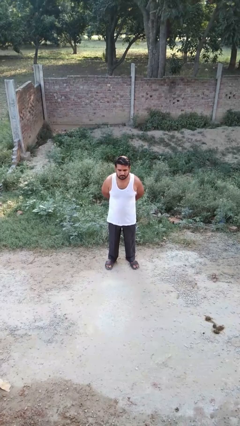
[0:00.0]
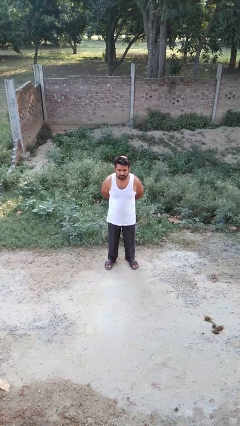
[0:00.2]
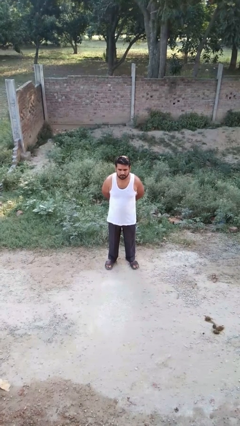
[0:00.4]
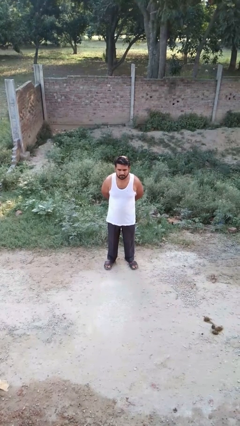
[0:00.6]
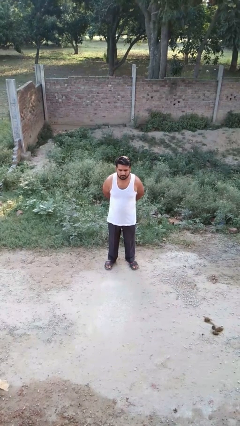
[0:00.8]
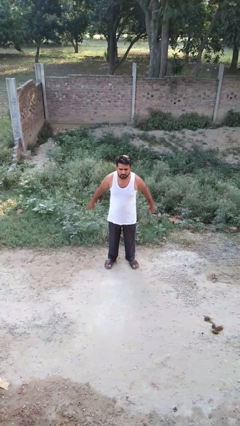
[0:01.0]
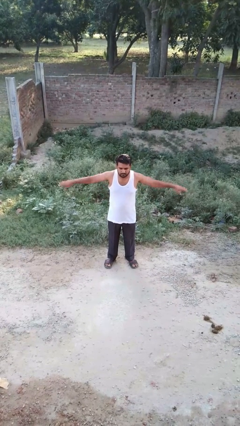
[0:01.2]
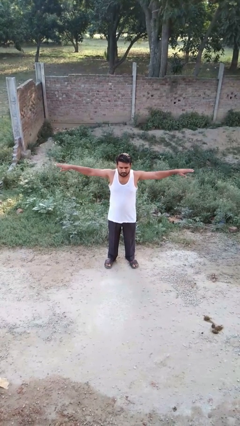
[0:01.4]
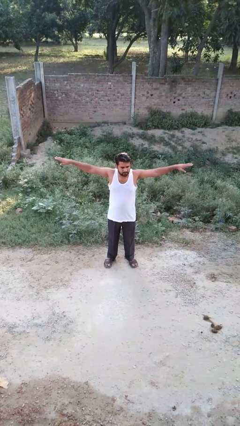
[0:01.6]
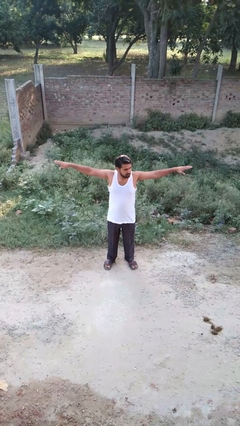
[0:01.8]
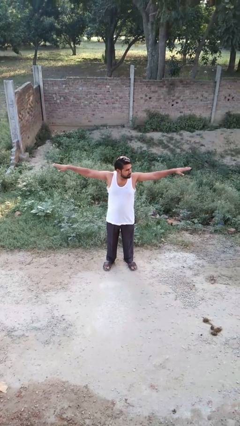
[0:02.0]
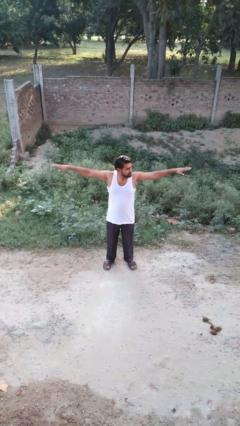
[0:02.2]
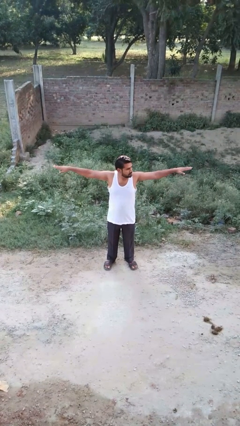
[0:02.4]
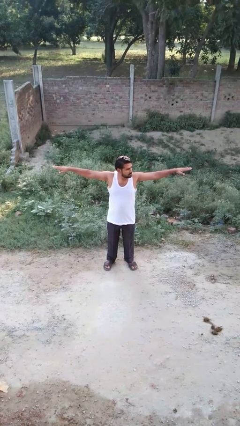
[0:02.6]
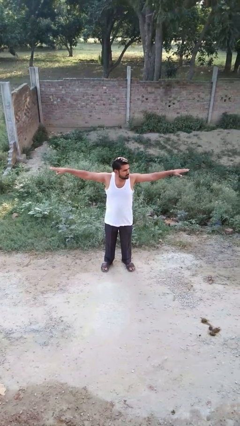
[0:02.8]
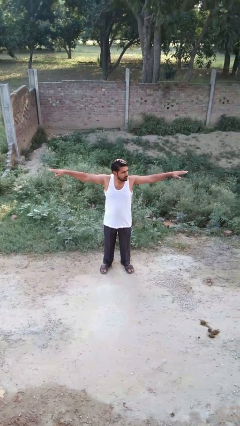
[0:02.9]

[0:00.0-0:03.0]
person stretches arms to side

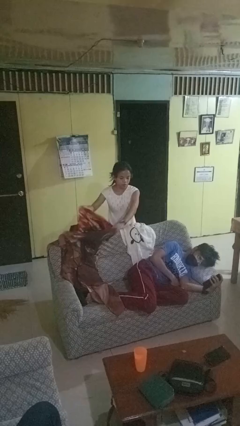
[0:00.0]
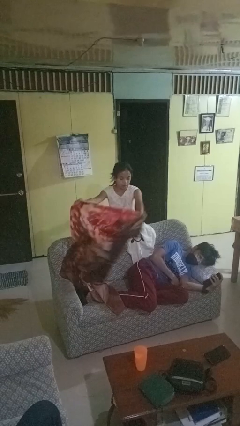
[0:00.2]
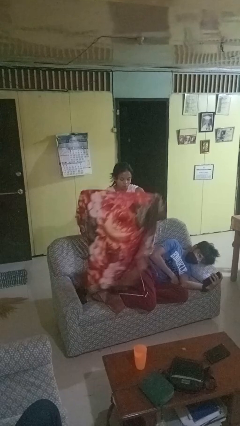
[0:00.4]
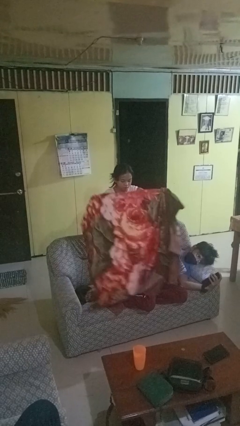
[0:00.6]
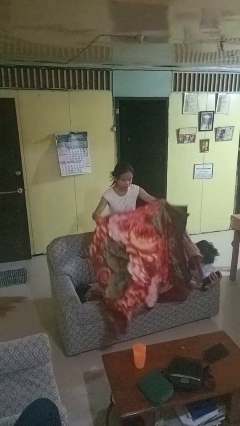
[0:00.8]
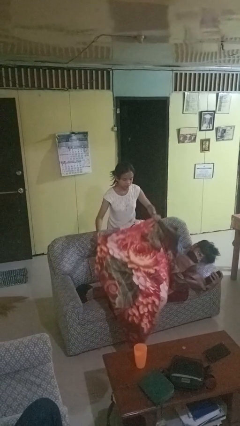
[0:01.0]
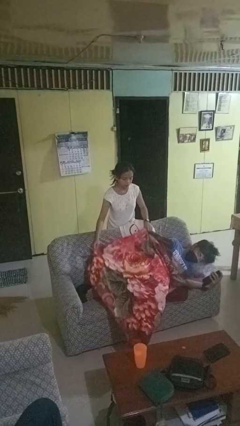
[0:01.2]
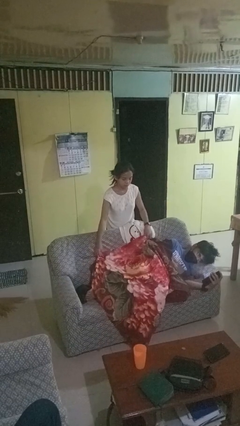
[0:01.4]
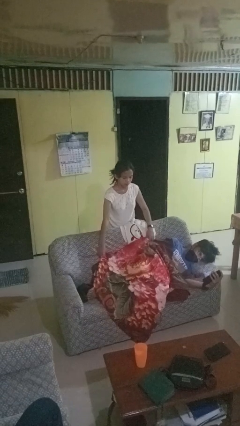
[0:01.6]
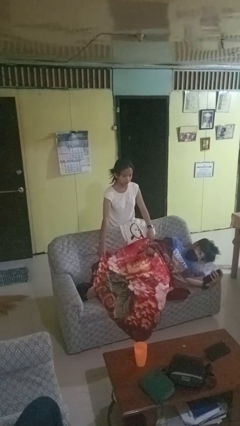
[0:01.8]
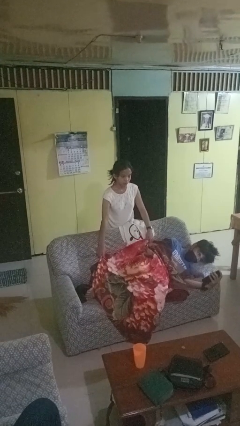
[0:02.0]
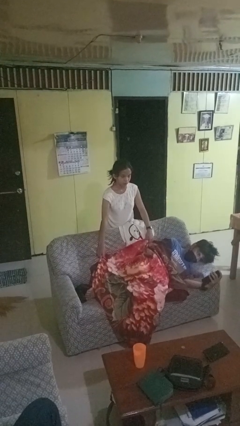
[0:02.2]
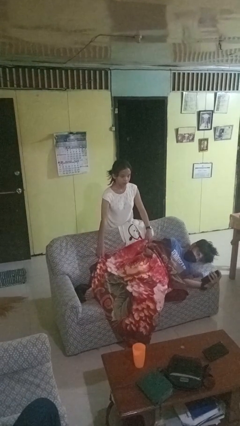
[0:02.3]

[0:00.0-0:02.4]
person covers friend with blanket

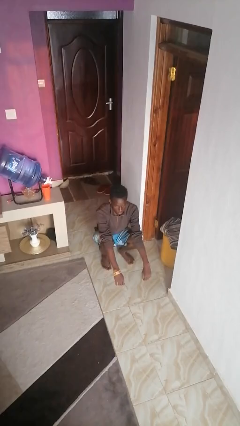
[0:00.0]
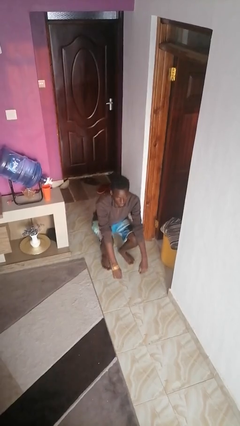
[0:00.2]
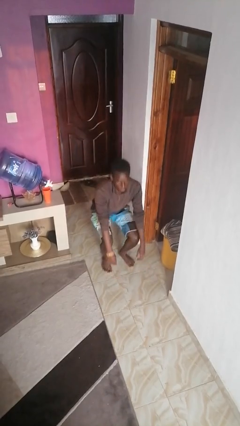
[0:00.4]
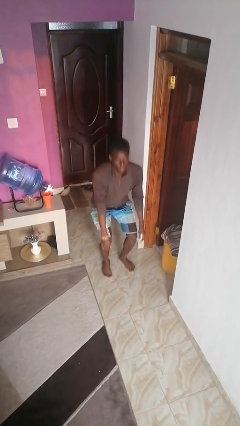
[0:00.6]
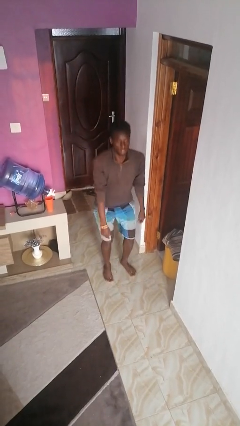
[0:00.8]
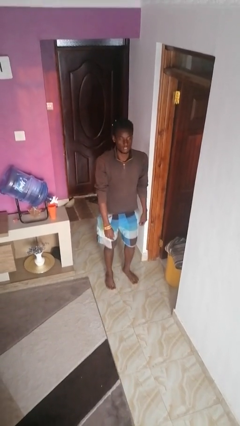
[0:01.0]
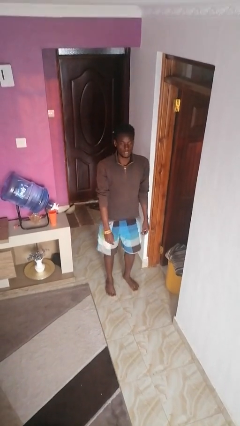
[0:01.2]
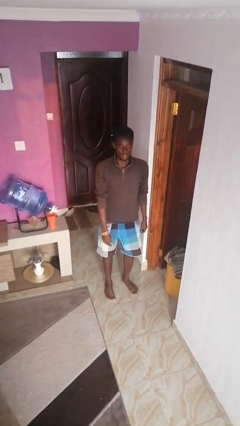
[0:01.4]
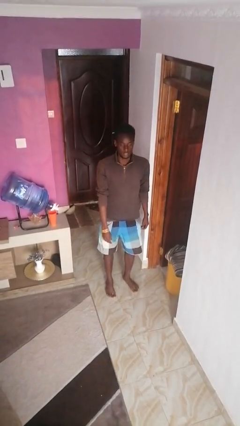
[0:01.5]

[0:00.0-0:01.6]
person stands up

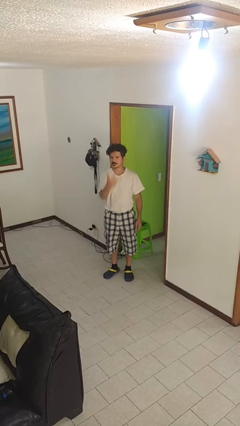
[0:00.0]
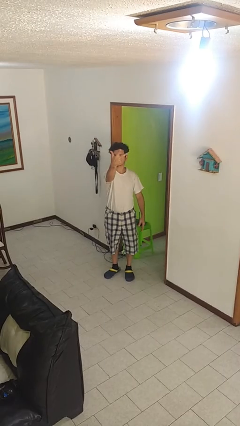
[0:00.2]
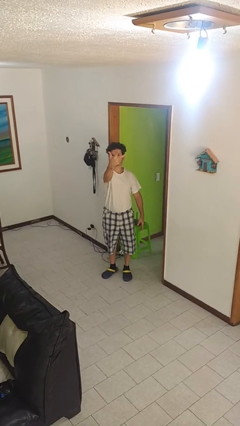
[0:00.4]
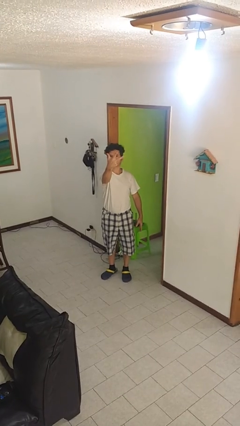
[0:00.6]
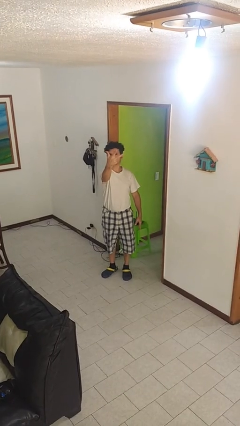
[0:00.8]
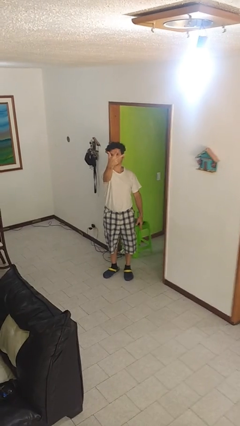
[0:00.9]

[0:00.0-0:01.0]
person gestures number three

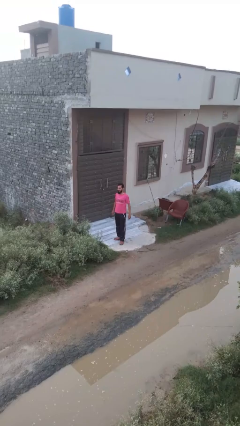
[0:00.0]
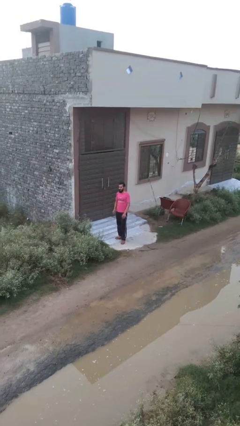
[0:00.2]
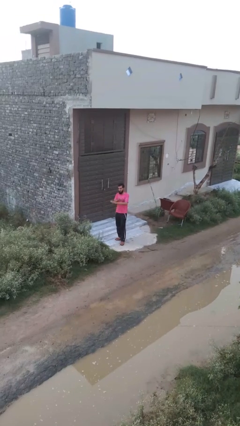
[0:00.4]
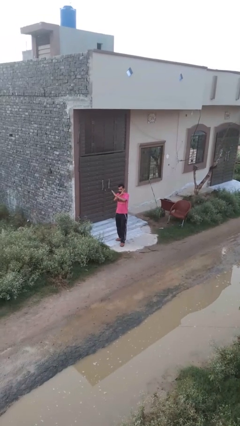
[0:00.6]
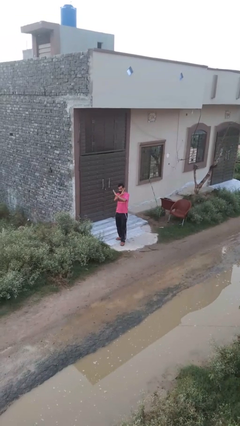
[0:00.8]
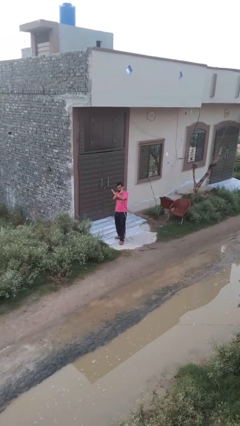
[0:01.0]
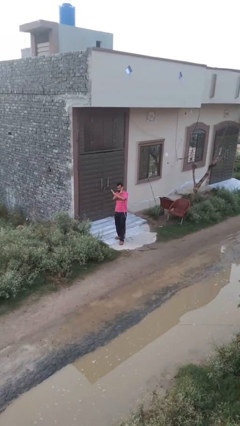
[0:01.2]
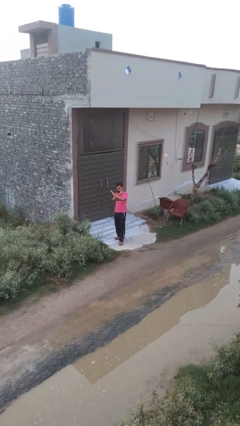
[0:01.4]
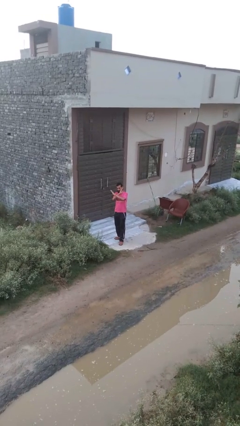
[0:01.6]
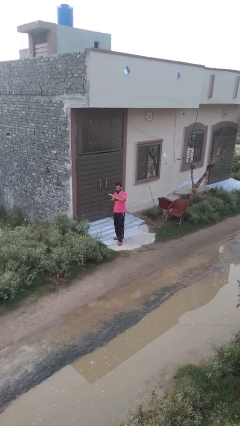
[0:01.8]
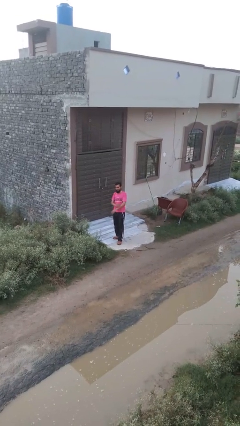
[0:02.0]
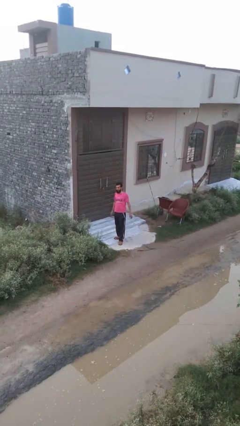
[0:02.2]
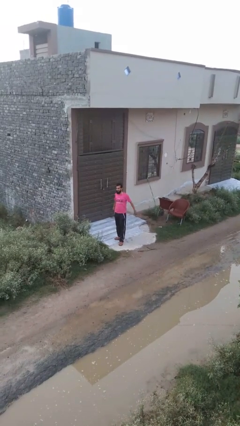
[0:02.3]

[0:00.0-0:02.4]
person crosses arms

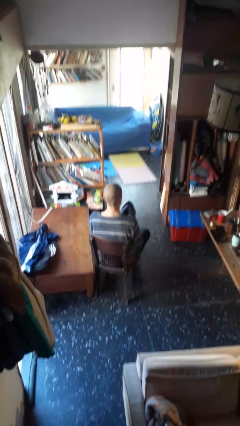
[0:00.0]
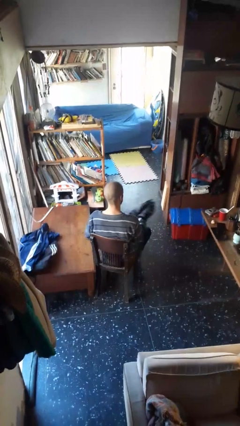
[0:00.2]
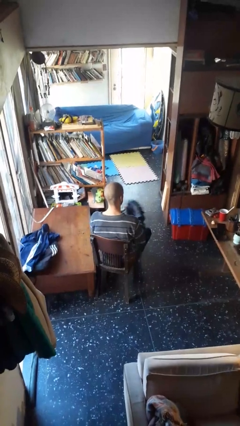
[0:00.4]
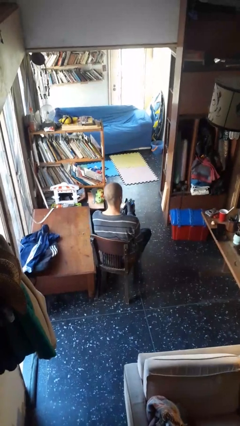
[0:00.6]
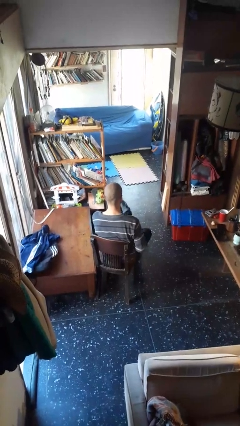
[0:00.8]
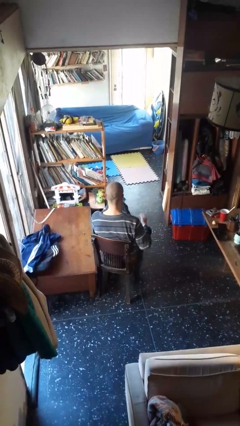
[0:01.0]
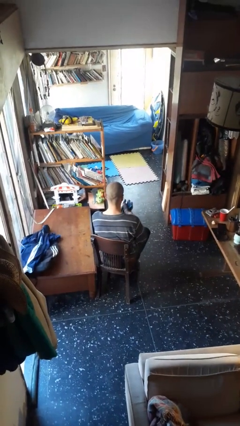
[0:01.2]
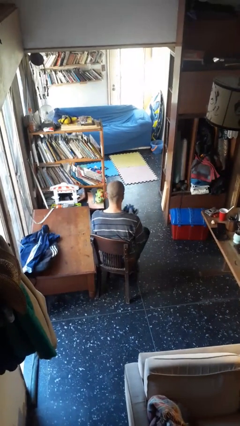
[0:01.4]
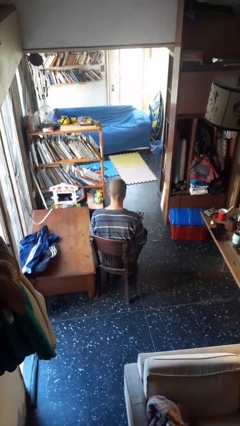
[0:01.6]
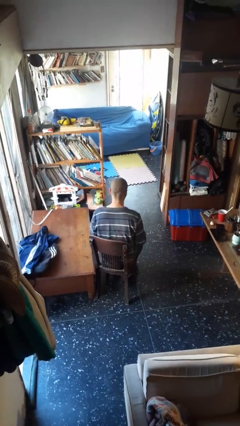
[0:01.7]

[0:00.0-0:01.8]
person takes off gloves

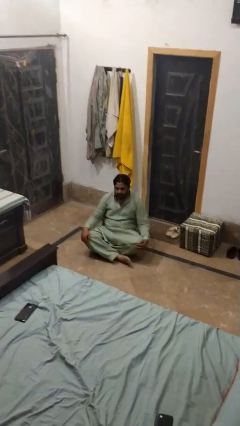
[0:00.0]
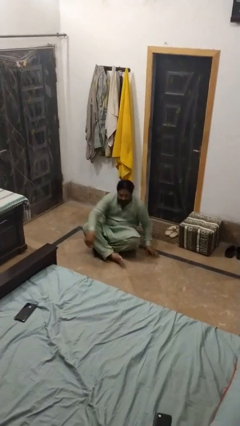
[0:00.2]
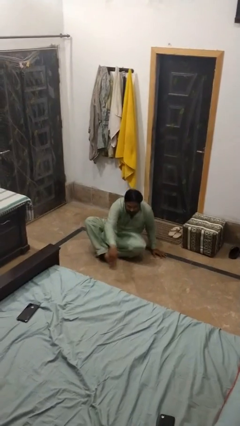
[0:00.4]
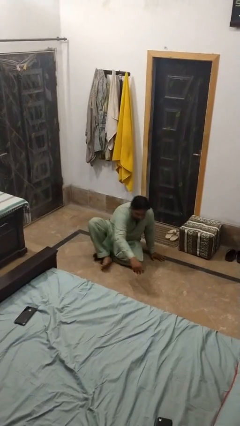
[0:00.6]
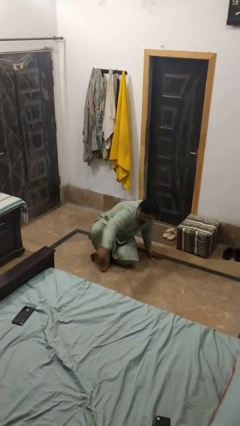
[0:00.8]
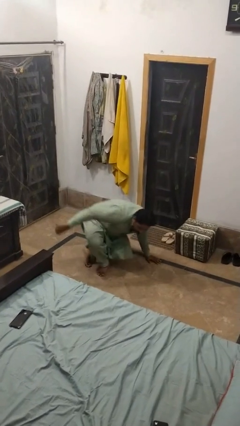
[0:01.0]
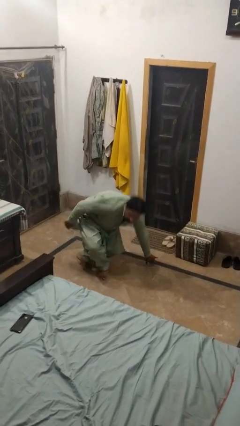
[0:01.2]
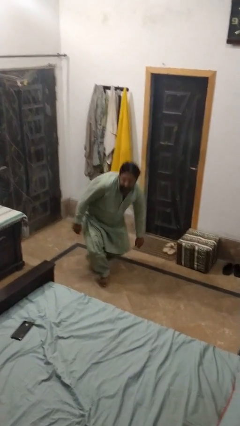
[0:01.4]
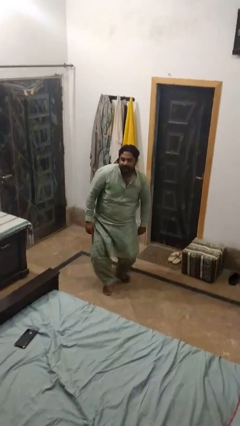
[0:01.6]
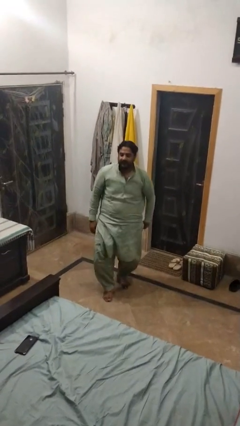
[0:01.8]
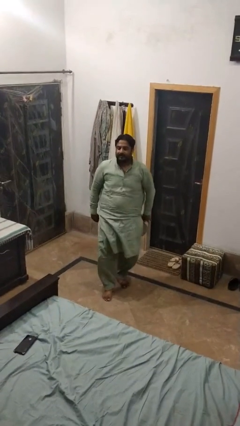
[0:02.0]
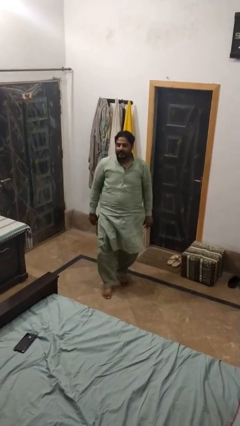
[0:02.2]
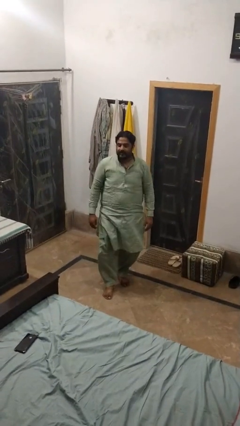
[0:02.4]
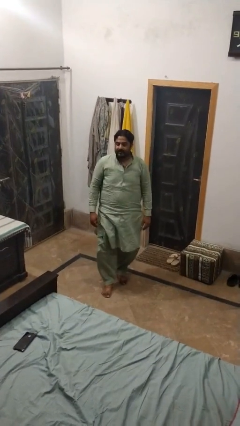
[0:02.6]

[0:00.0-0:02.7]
person stands up from floor

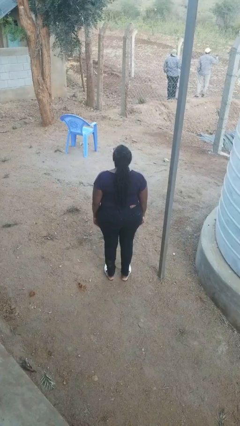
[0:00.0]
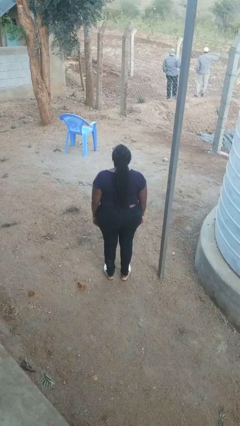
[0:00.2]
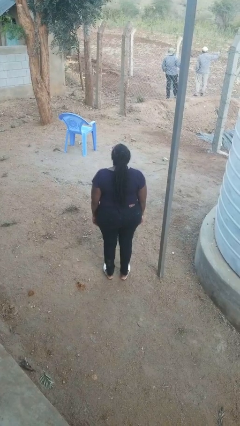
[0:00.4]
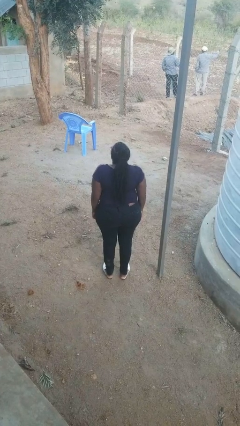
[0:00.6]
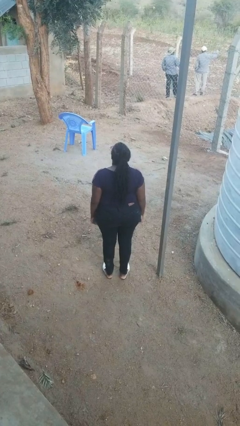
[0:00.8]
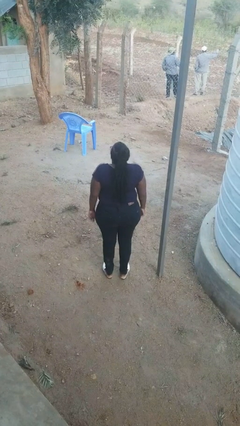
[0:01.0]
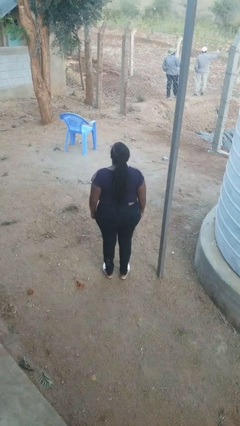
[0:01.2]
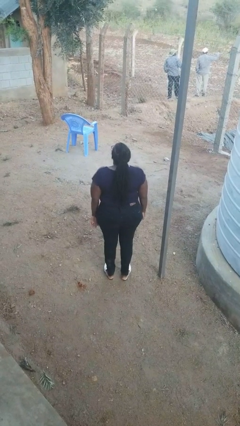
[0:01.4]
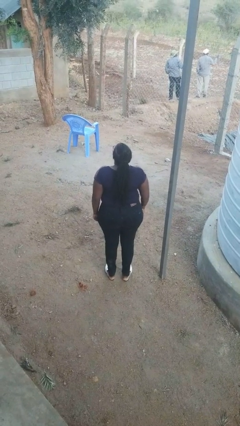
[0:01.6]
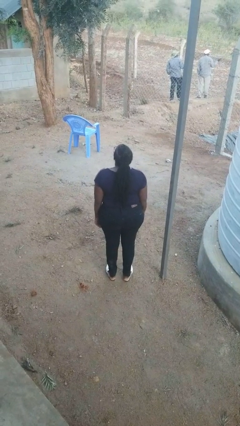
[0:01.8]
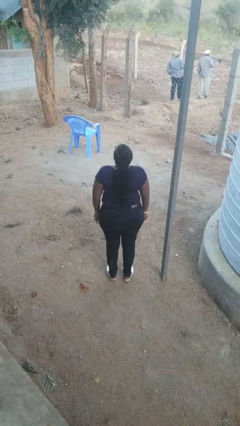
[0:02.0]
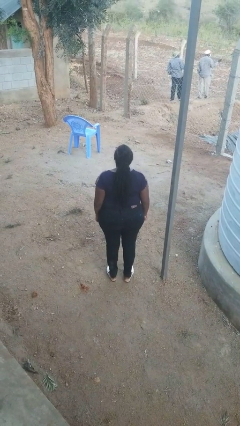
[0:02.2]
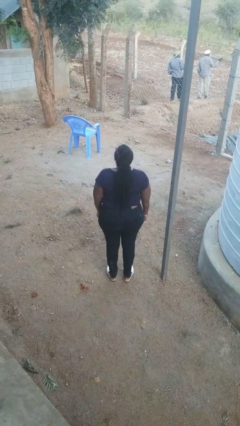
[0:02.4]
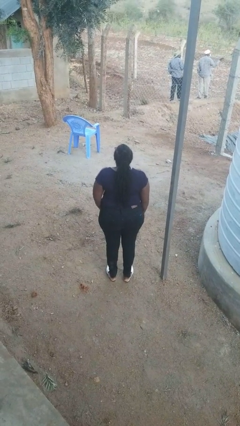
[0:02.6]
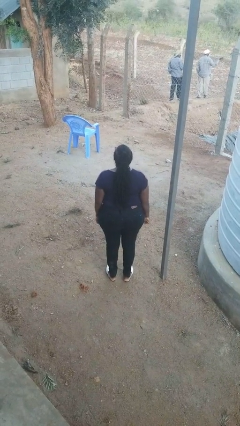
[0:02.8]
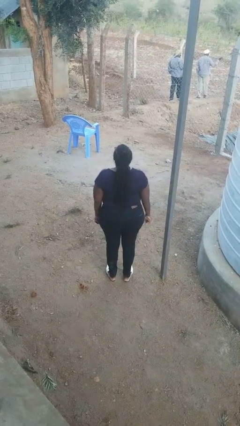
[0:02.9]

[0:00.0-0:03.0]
person shrugs
